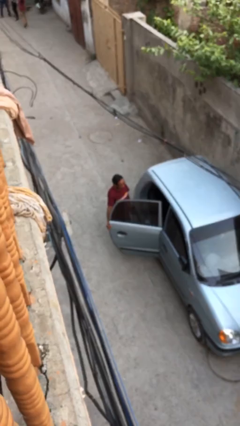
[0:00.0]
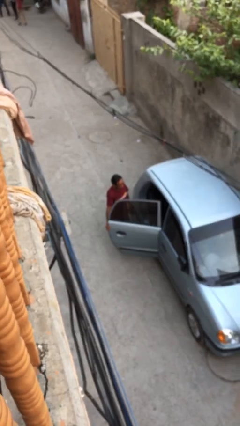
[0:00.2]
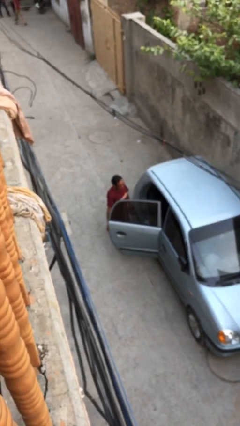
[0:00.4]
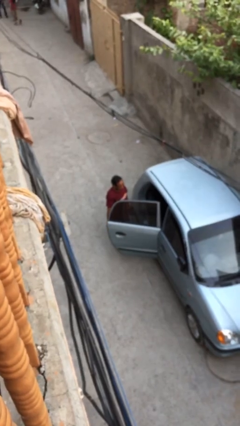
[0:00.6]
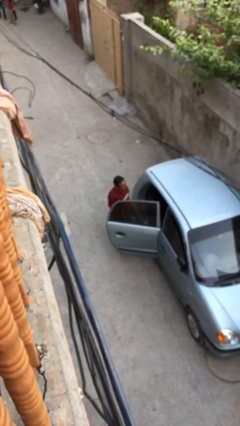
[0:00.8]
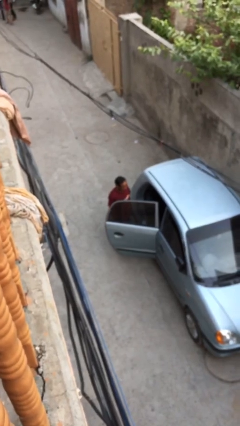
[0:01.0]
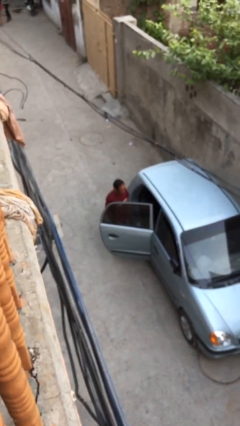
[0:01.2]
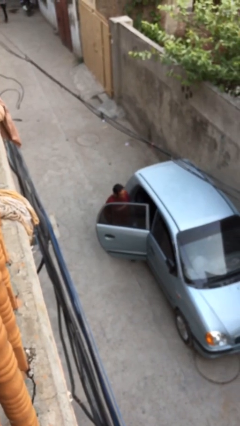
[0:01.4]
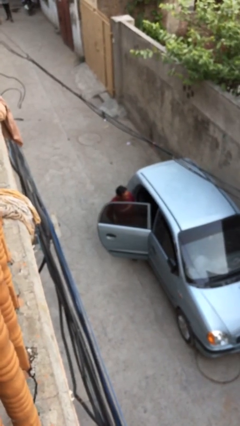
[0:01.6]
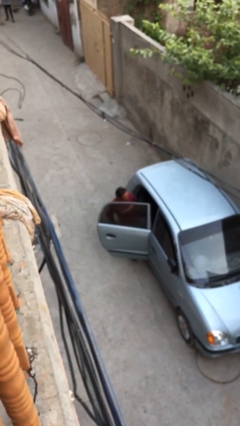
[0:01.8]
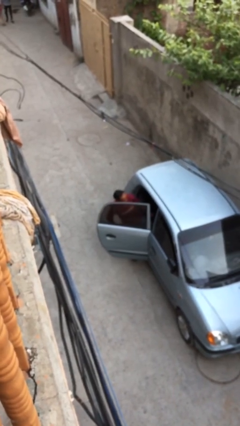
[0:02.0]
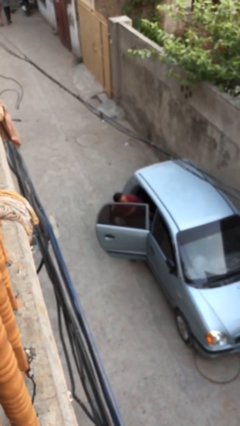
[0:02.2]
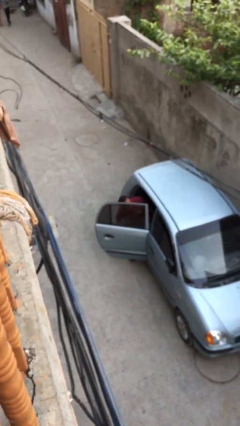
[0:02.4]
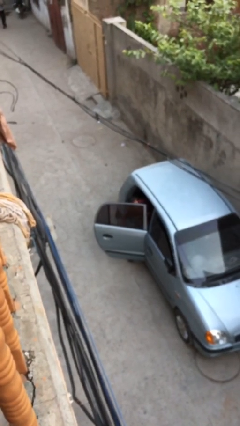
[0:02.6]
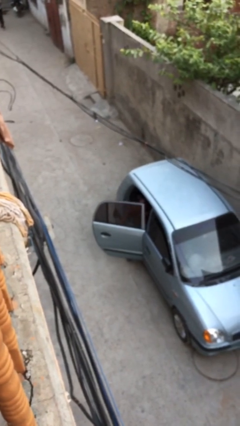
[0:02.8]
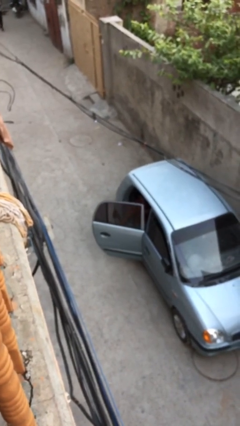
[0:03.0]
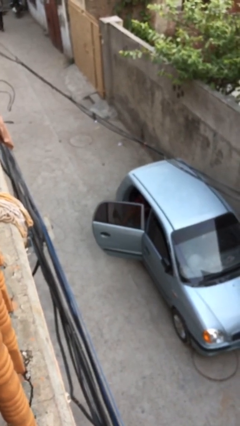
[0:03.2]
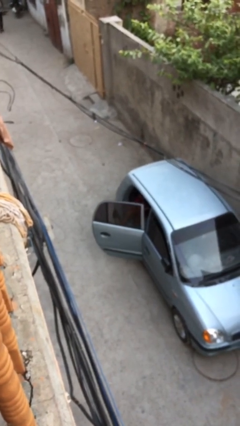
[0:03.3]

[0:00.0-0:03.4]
person enters car

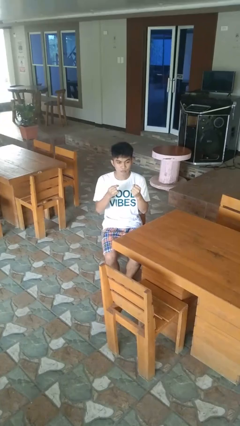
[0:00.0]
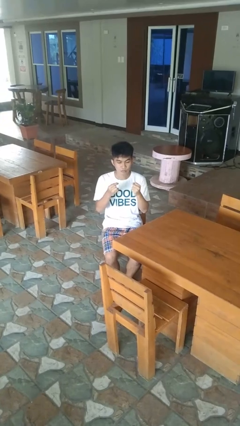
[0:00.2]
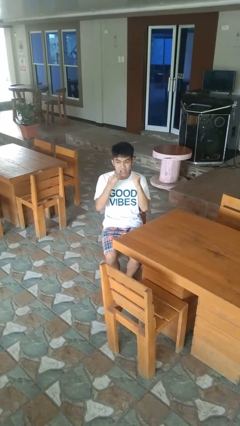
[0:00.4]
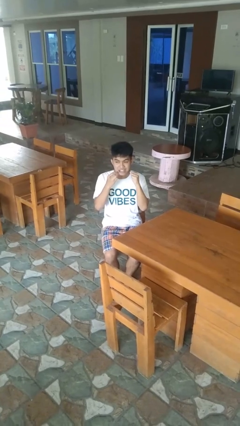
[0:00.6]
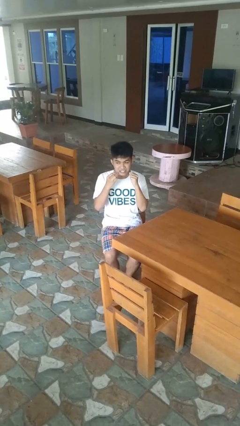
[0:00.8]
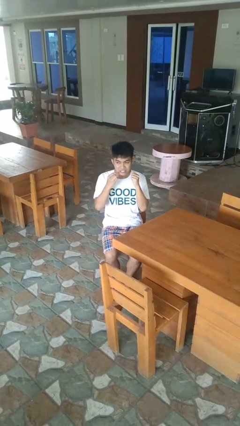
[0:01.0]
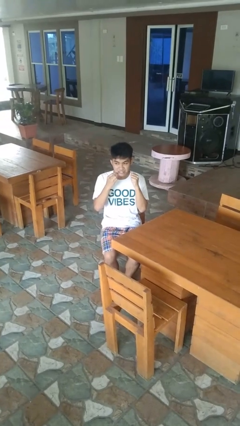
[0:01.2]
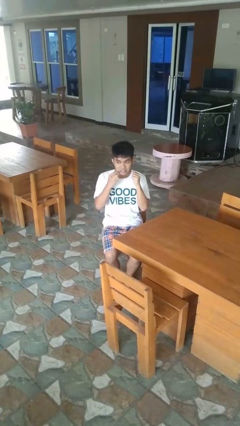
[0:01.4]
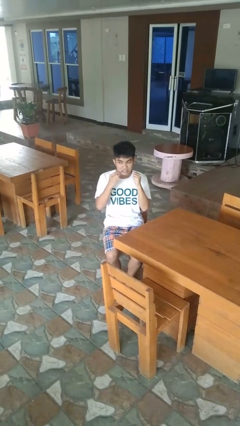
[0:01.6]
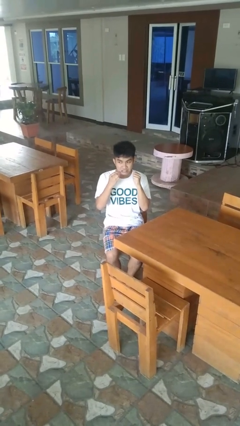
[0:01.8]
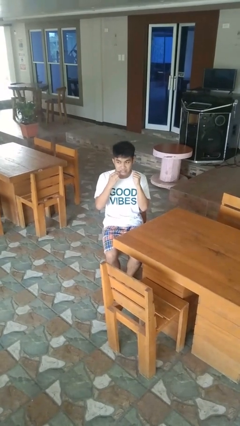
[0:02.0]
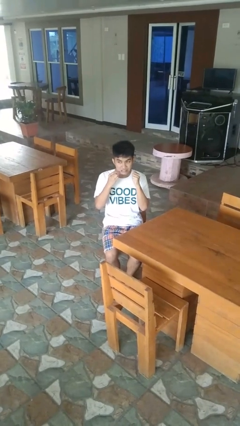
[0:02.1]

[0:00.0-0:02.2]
person flosses

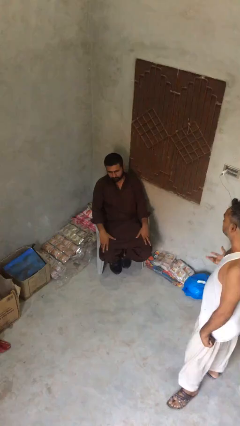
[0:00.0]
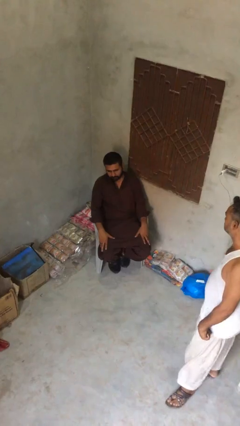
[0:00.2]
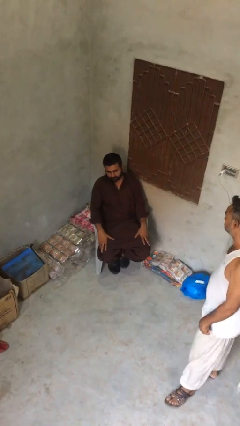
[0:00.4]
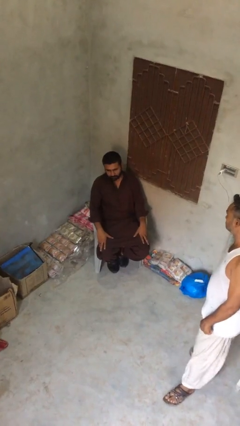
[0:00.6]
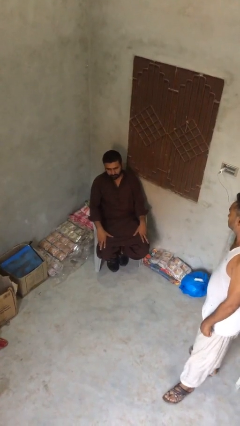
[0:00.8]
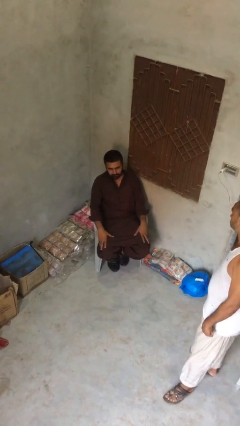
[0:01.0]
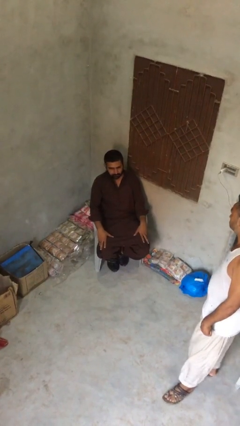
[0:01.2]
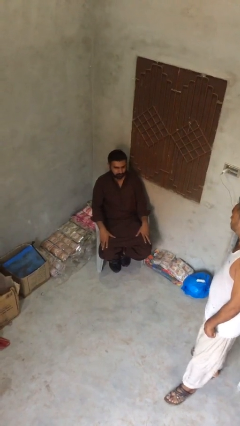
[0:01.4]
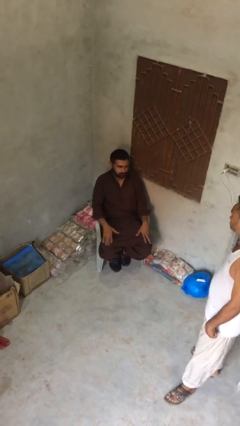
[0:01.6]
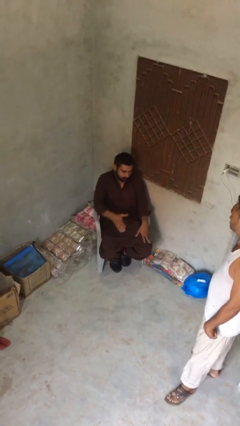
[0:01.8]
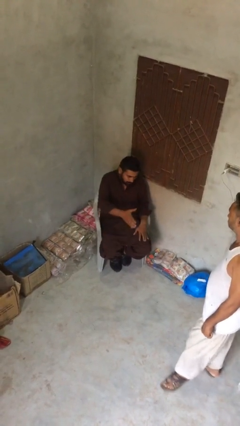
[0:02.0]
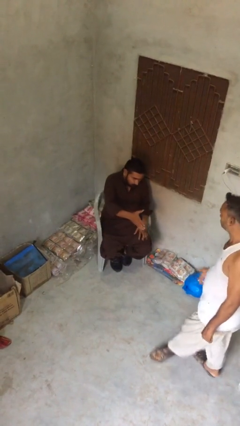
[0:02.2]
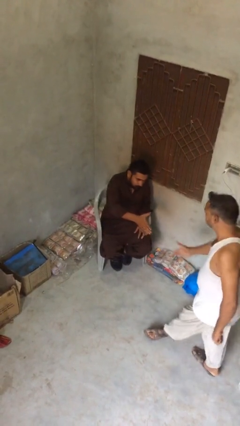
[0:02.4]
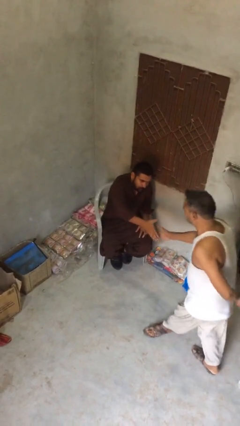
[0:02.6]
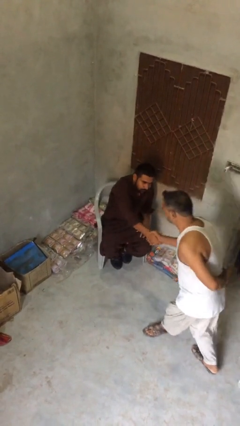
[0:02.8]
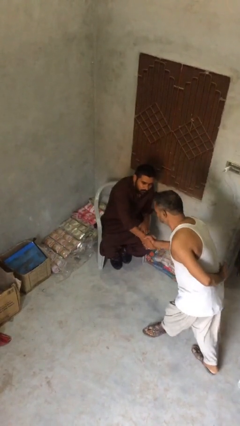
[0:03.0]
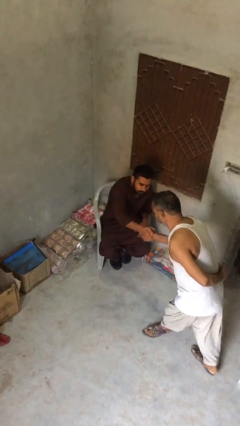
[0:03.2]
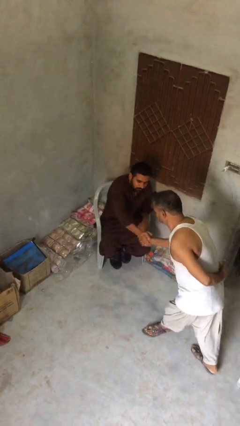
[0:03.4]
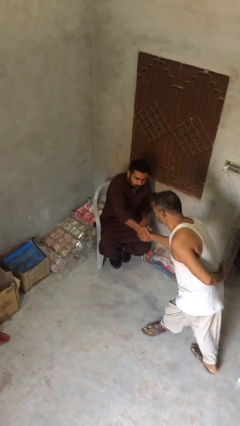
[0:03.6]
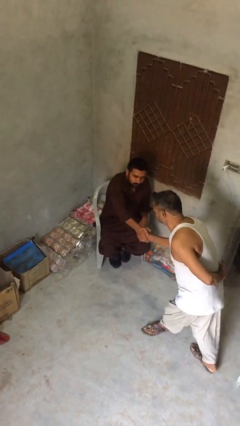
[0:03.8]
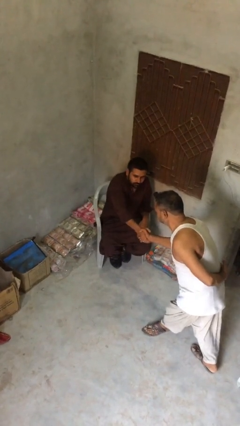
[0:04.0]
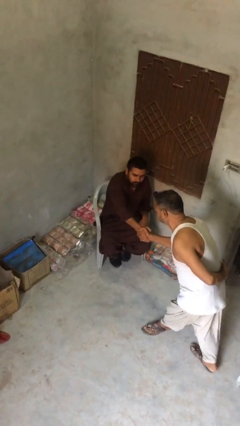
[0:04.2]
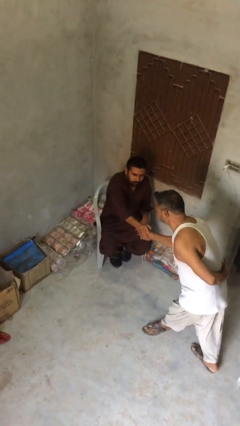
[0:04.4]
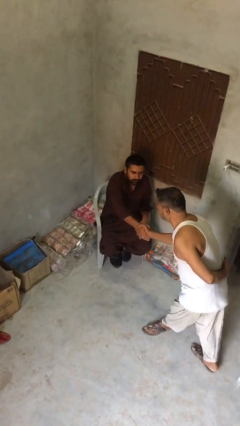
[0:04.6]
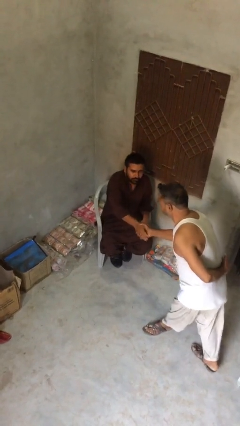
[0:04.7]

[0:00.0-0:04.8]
person shakes hand

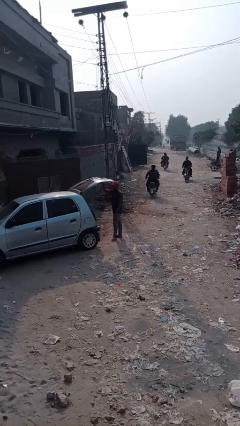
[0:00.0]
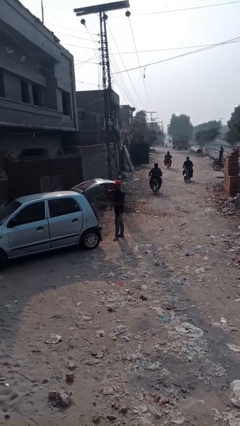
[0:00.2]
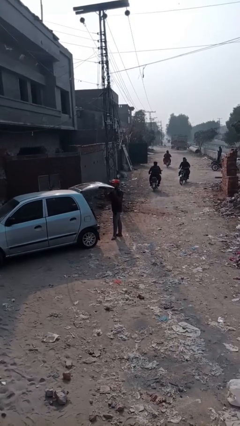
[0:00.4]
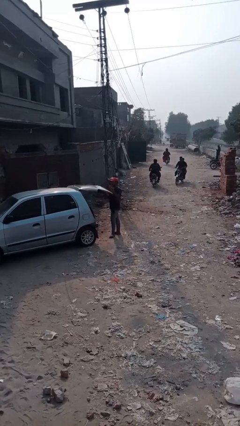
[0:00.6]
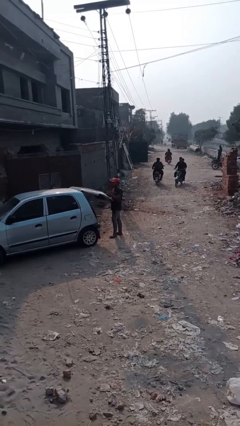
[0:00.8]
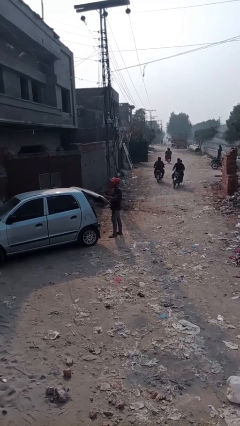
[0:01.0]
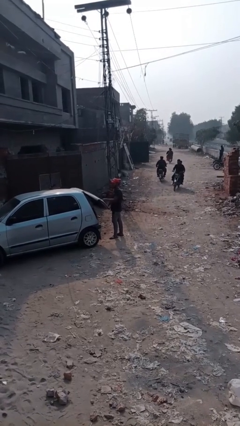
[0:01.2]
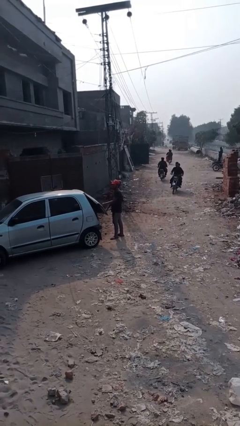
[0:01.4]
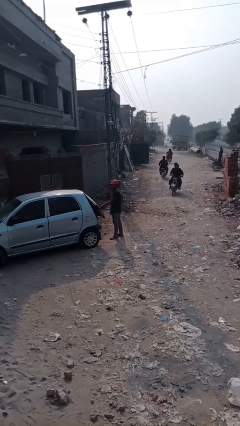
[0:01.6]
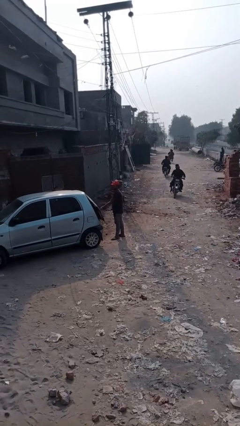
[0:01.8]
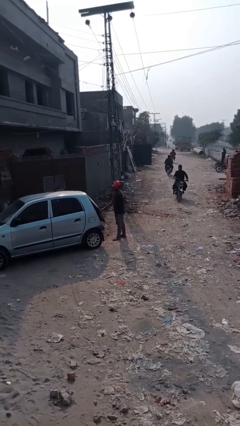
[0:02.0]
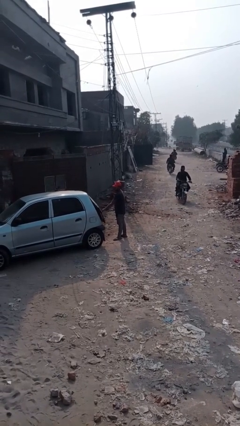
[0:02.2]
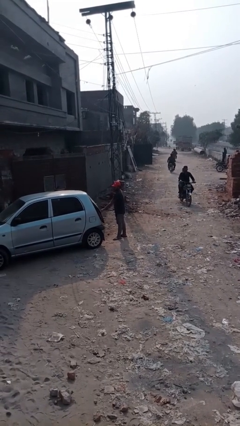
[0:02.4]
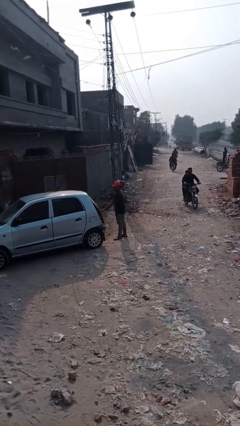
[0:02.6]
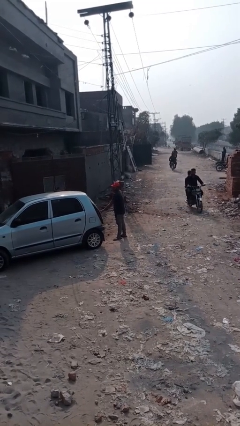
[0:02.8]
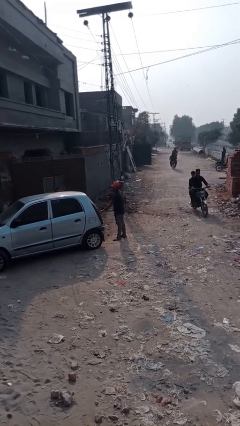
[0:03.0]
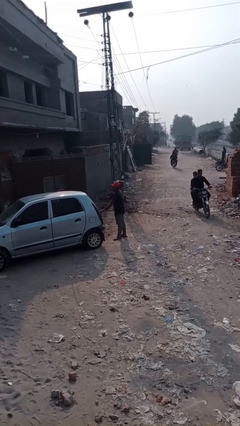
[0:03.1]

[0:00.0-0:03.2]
person closes car trunk

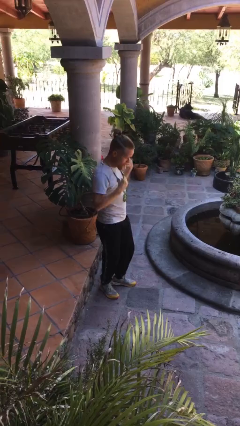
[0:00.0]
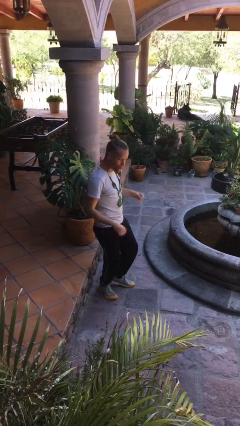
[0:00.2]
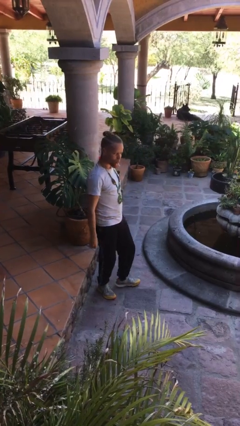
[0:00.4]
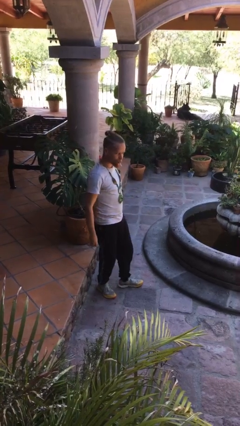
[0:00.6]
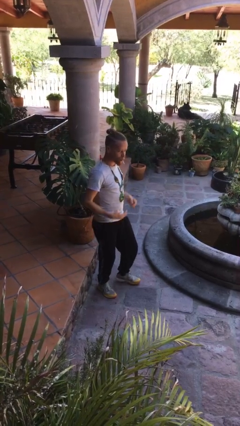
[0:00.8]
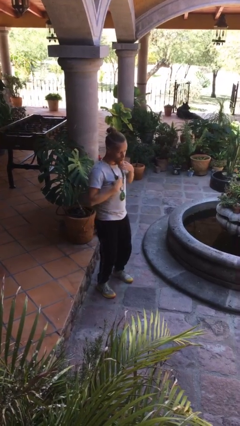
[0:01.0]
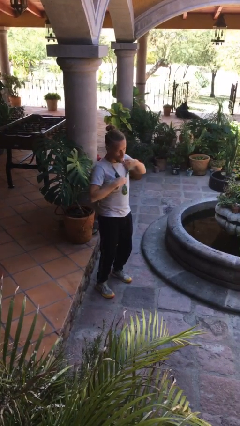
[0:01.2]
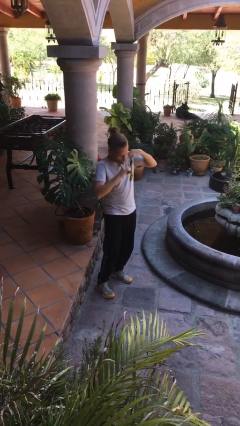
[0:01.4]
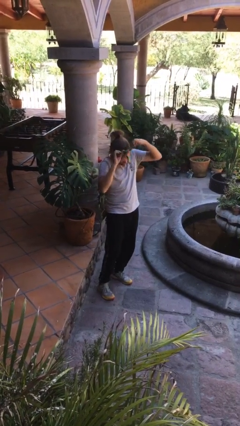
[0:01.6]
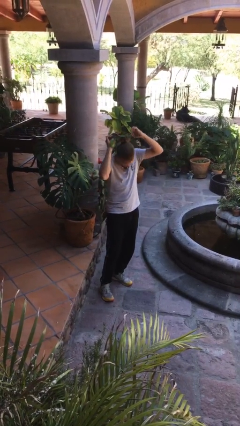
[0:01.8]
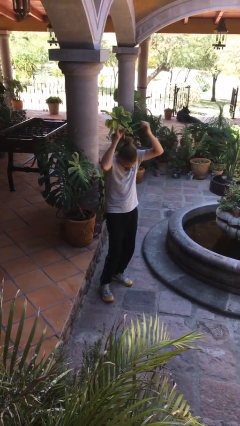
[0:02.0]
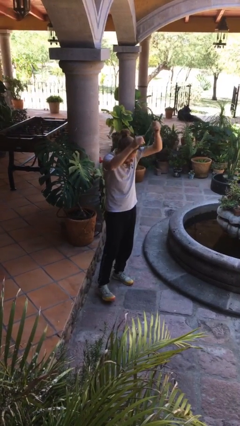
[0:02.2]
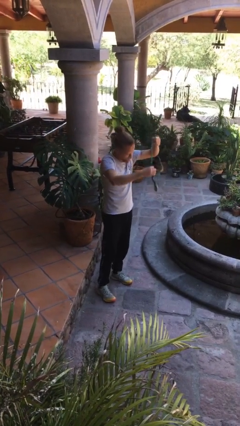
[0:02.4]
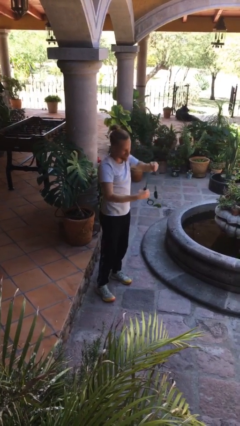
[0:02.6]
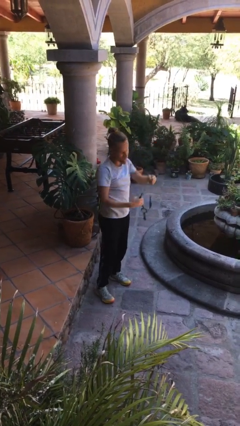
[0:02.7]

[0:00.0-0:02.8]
person takes off necklace

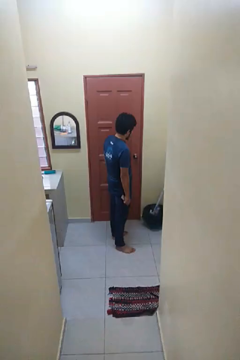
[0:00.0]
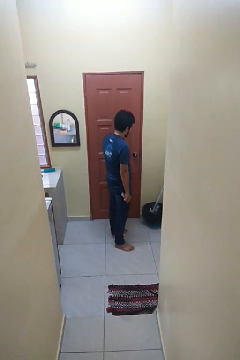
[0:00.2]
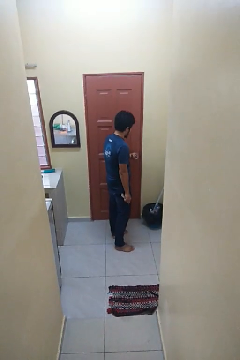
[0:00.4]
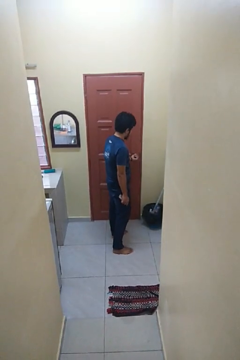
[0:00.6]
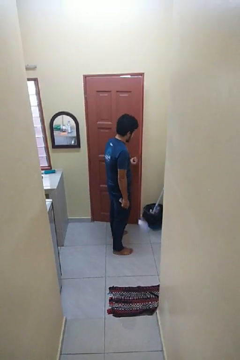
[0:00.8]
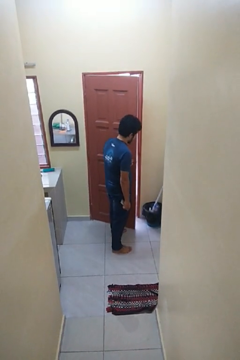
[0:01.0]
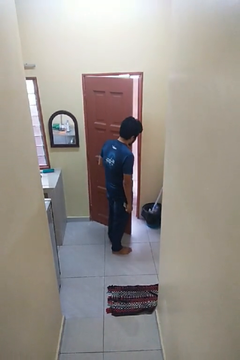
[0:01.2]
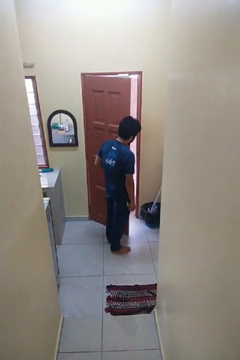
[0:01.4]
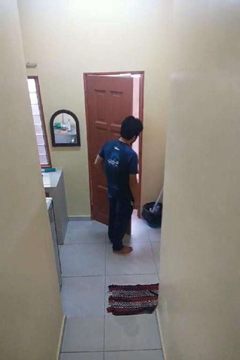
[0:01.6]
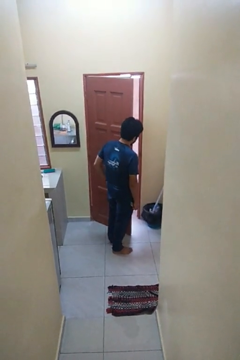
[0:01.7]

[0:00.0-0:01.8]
person opens facility door
